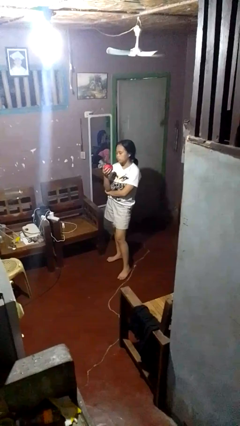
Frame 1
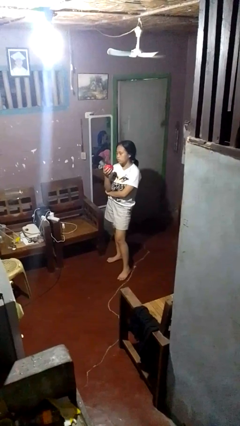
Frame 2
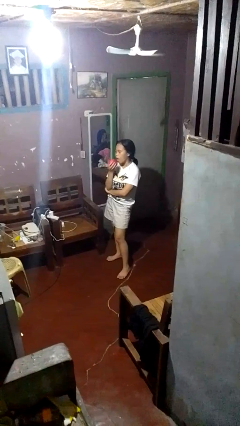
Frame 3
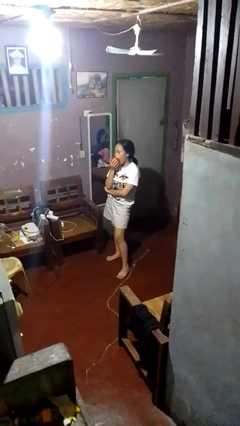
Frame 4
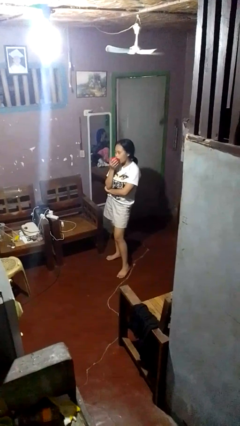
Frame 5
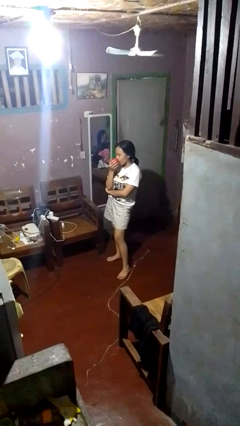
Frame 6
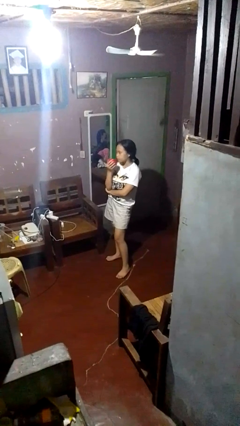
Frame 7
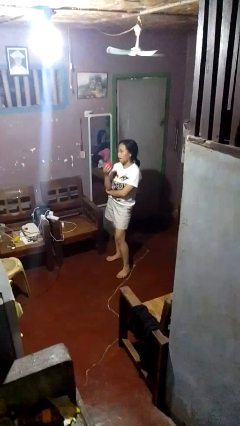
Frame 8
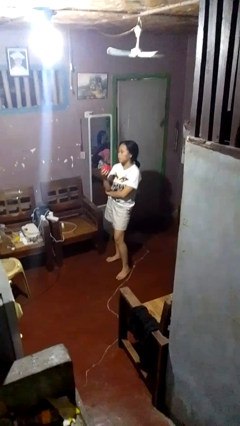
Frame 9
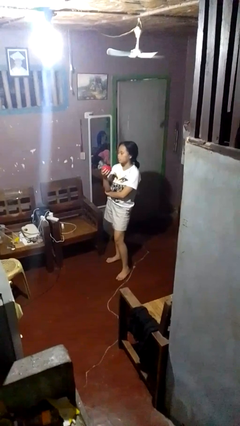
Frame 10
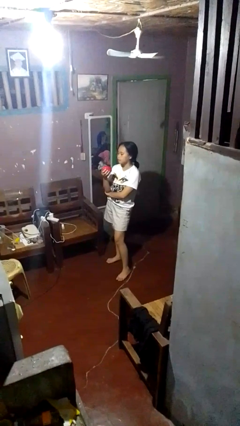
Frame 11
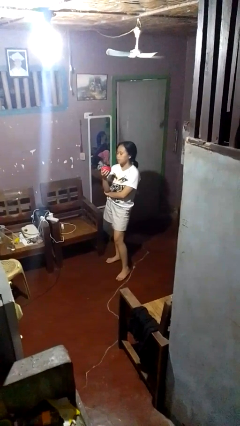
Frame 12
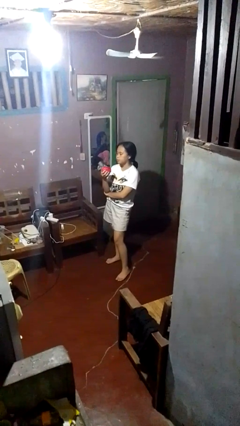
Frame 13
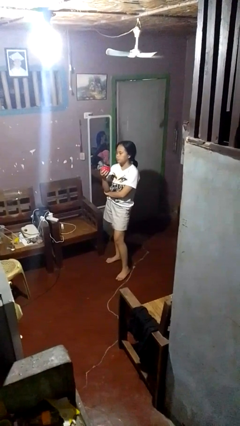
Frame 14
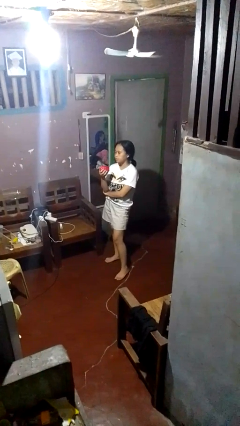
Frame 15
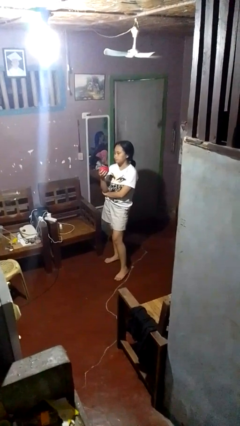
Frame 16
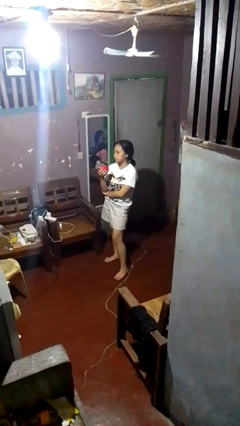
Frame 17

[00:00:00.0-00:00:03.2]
person eats apple

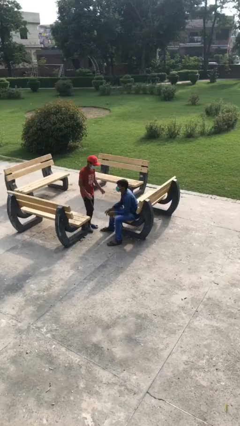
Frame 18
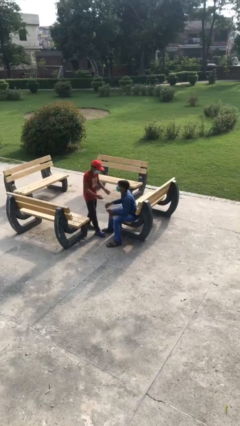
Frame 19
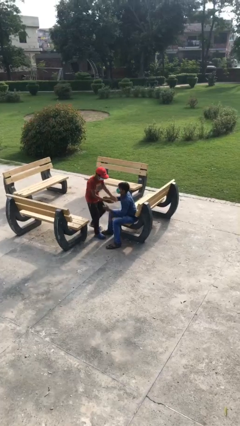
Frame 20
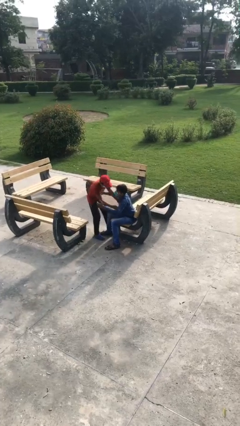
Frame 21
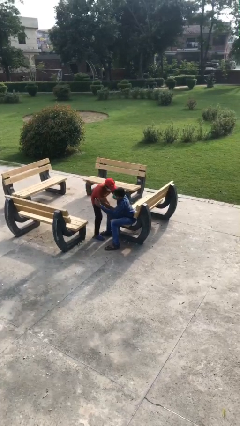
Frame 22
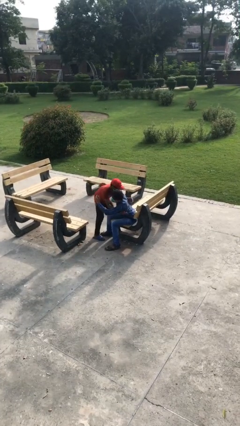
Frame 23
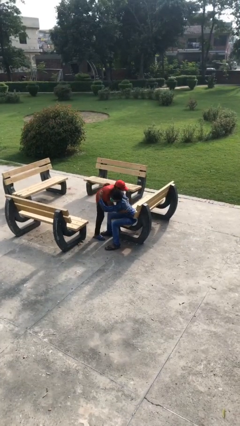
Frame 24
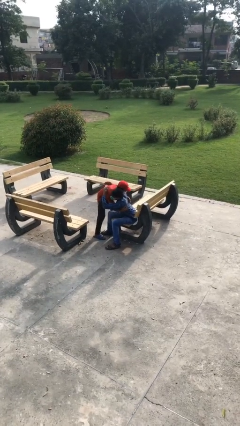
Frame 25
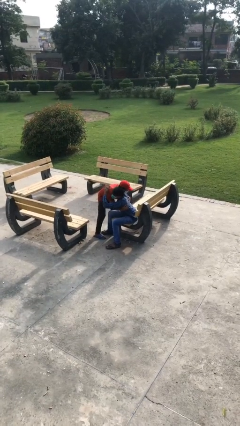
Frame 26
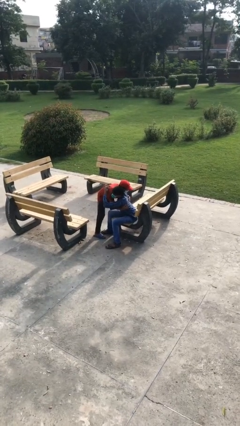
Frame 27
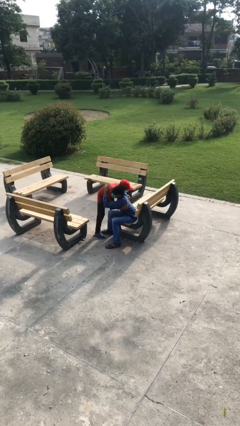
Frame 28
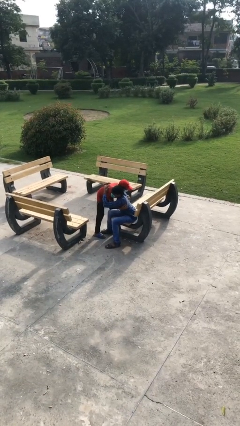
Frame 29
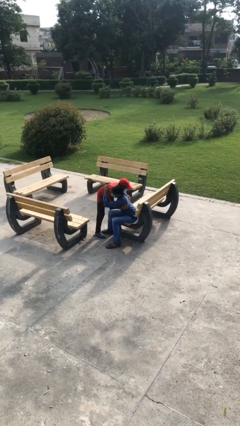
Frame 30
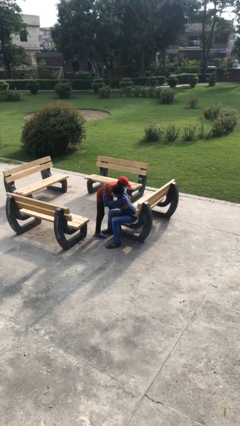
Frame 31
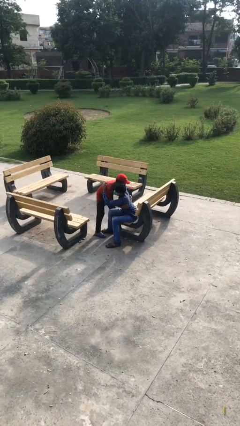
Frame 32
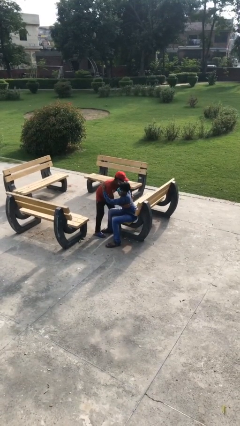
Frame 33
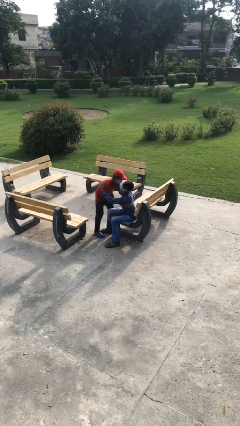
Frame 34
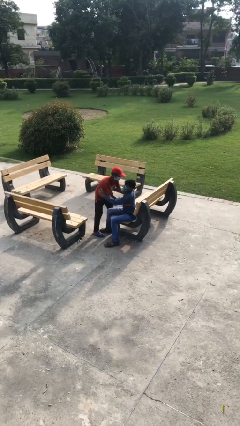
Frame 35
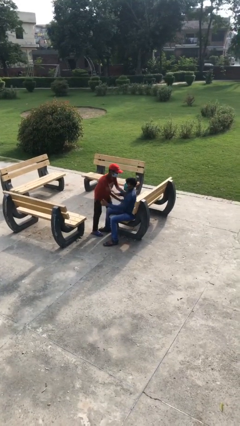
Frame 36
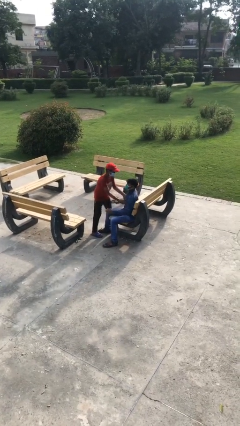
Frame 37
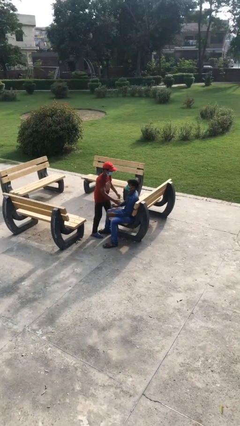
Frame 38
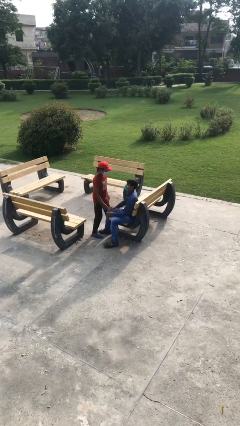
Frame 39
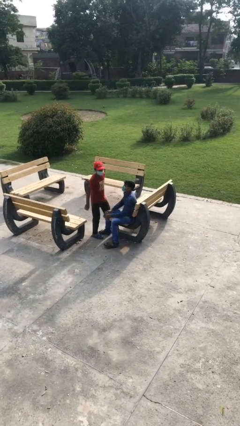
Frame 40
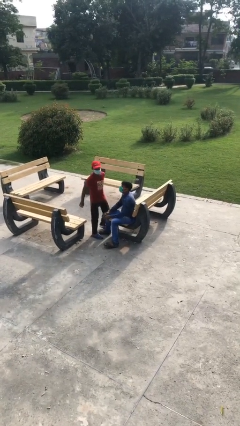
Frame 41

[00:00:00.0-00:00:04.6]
person embraces person

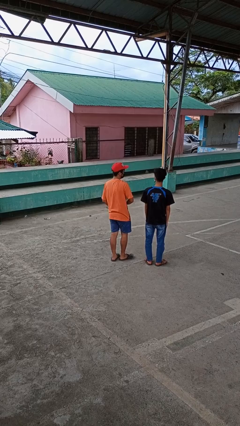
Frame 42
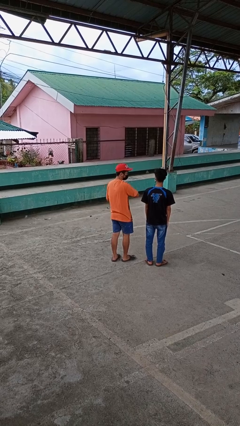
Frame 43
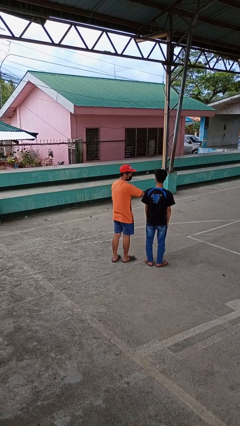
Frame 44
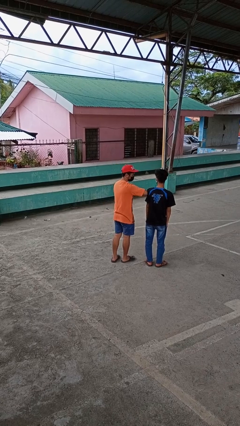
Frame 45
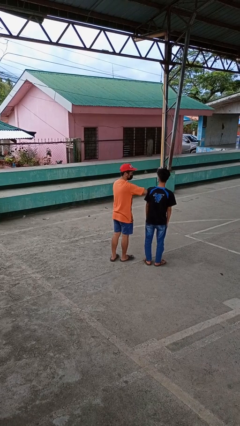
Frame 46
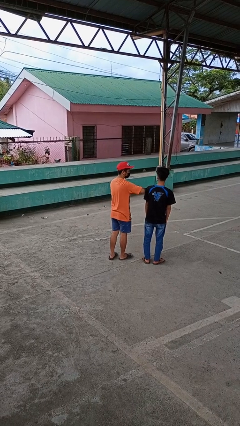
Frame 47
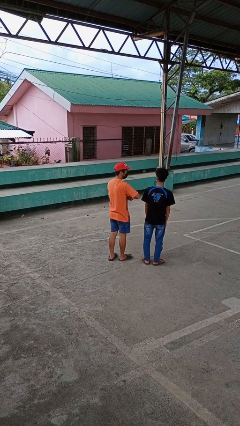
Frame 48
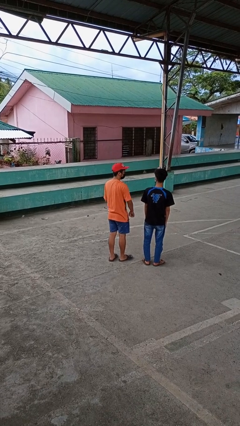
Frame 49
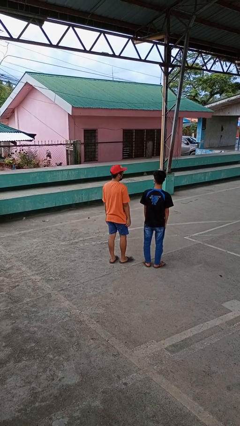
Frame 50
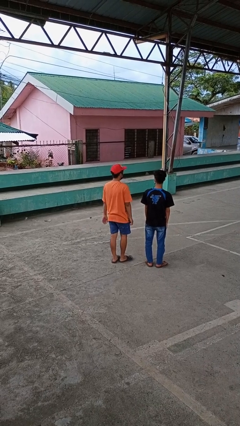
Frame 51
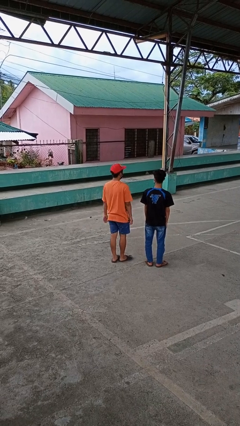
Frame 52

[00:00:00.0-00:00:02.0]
person nudges person with elbow

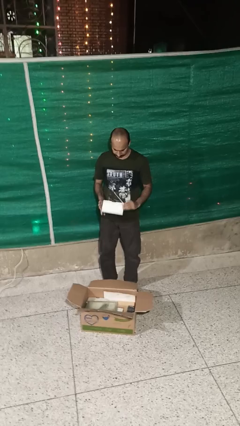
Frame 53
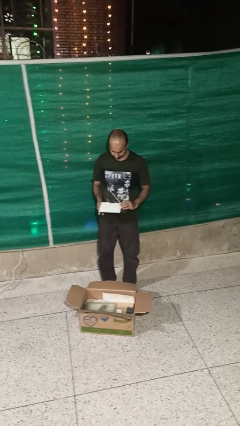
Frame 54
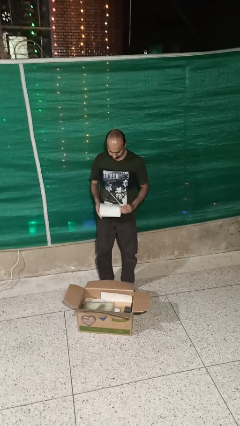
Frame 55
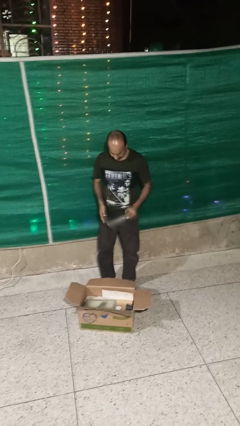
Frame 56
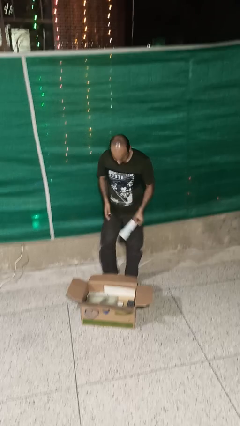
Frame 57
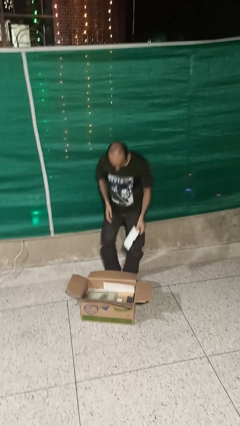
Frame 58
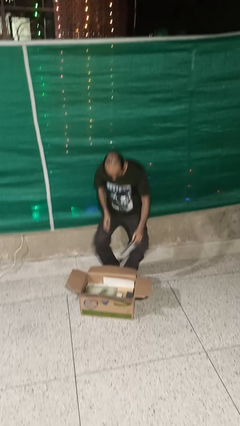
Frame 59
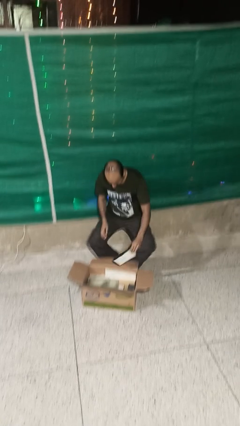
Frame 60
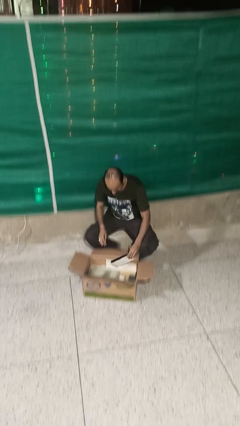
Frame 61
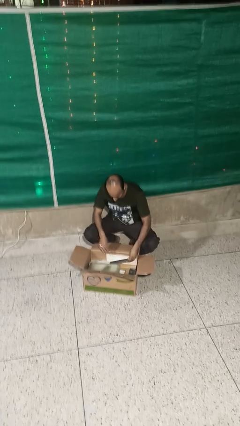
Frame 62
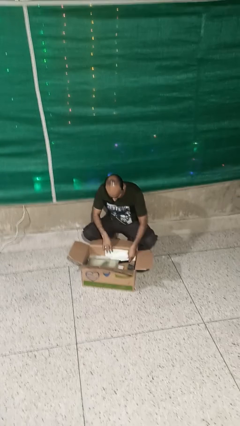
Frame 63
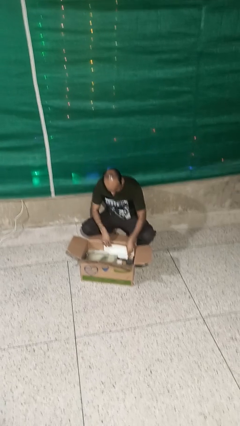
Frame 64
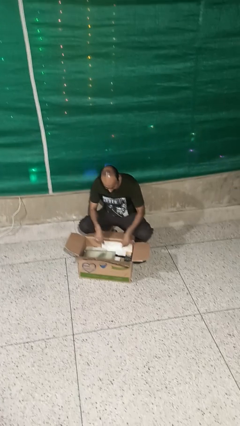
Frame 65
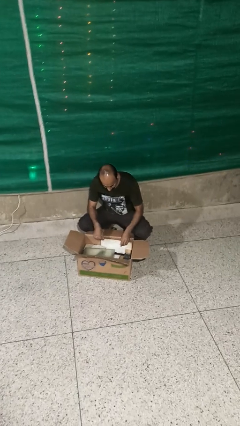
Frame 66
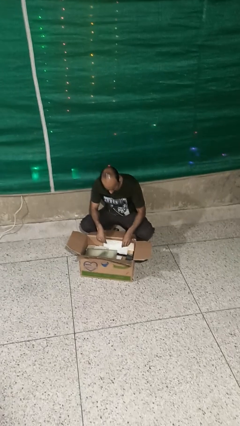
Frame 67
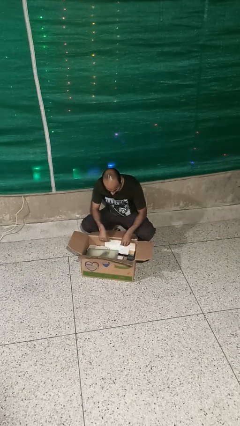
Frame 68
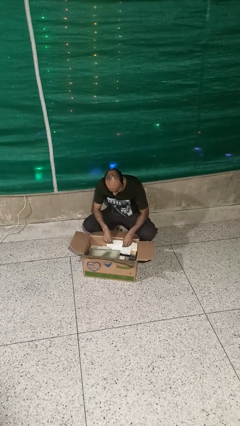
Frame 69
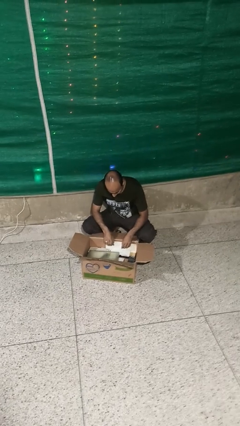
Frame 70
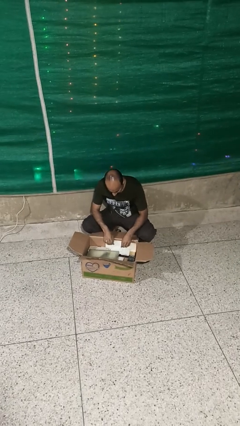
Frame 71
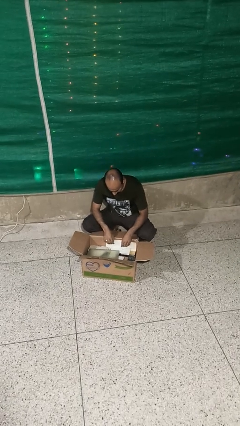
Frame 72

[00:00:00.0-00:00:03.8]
person puts object into box

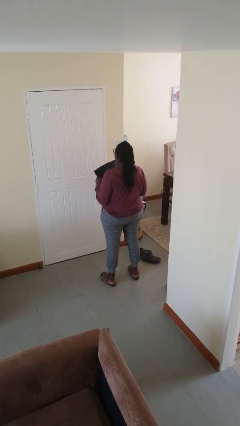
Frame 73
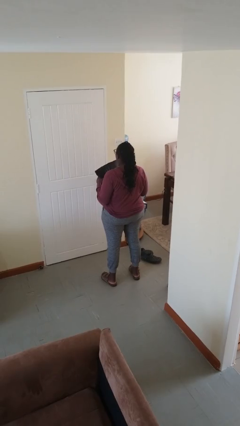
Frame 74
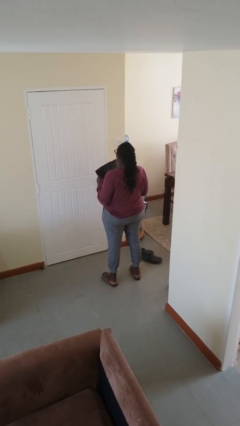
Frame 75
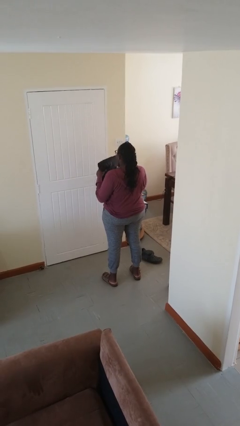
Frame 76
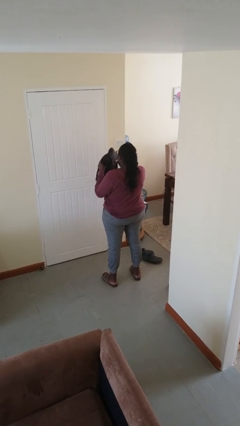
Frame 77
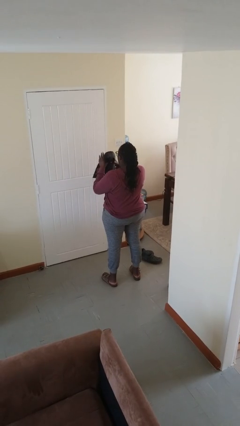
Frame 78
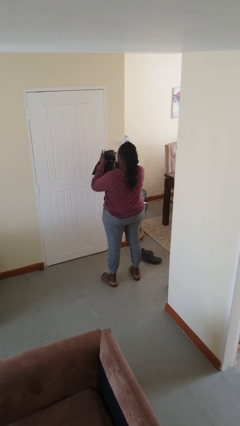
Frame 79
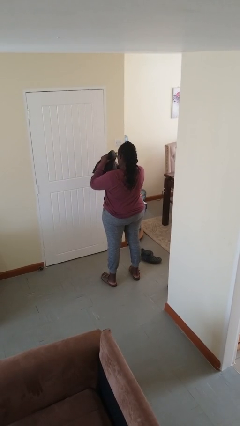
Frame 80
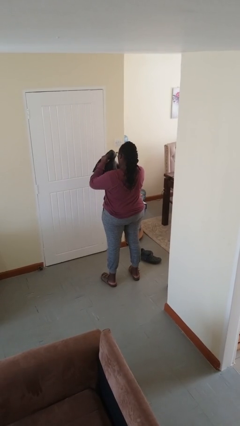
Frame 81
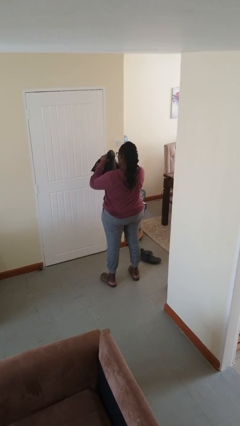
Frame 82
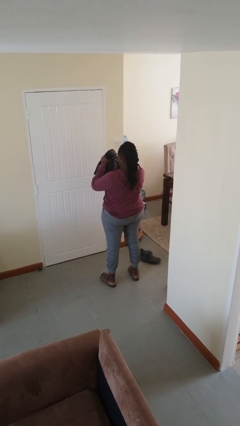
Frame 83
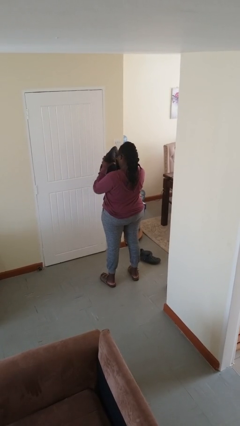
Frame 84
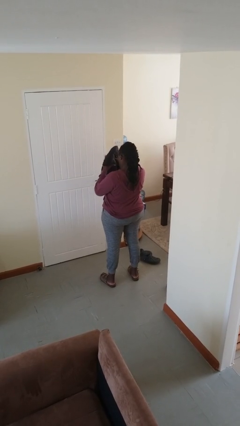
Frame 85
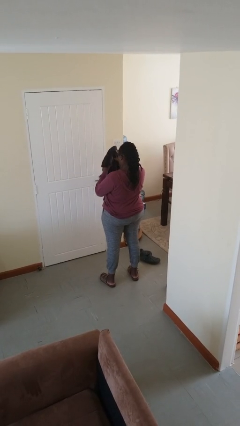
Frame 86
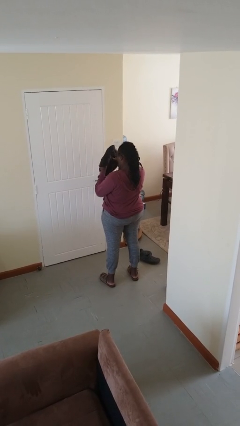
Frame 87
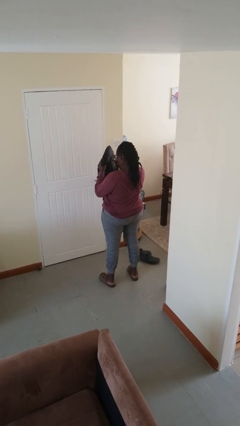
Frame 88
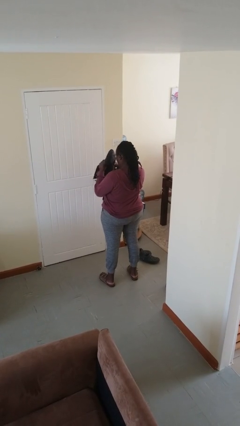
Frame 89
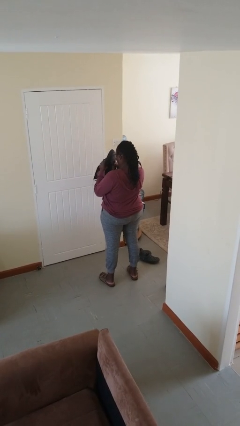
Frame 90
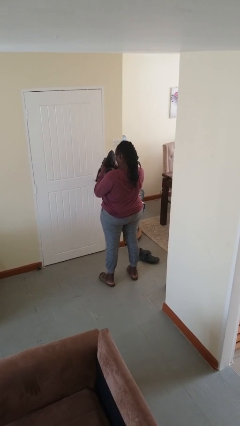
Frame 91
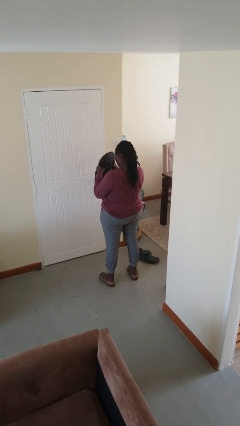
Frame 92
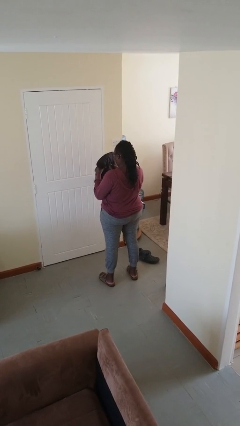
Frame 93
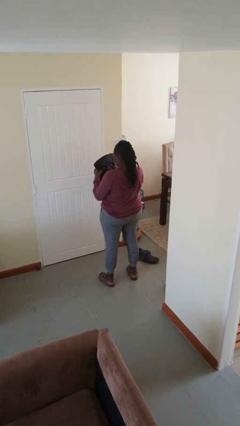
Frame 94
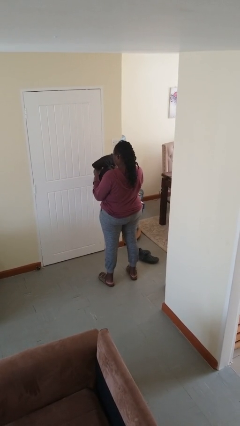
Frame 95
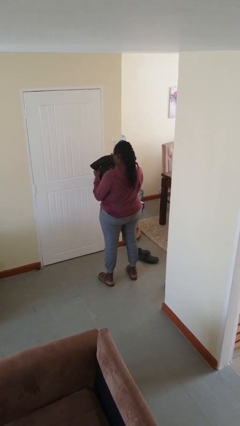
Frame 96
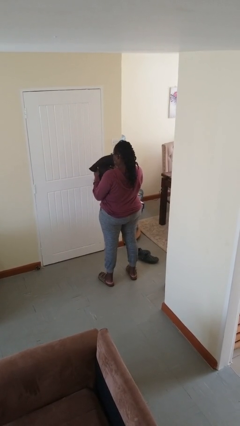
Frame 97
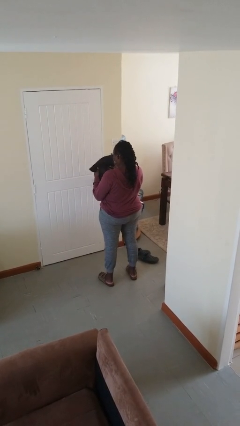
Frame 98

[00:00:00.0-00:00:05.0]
person squeezes object
